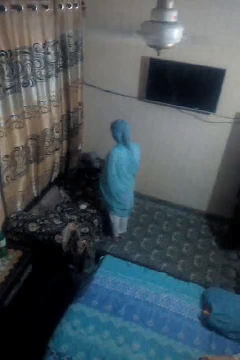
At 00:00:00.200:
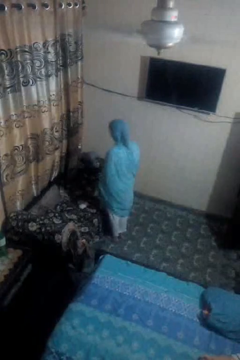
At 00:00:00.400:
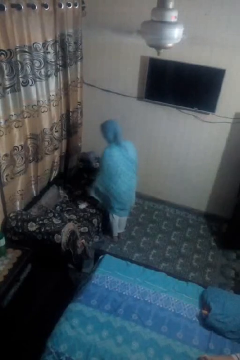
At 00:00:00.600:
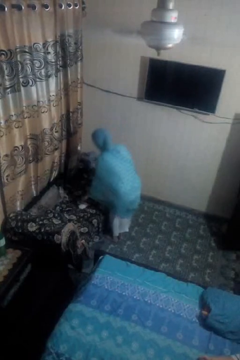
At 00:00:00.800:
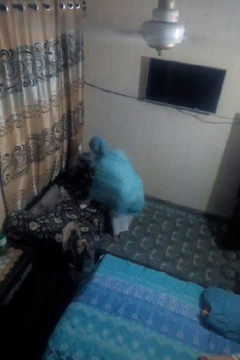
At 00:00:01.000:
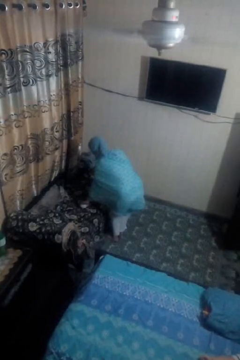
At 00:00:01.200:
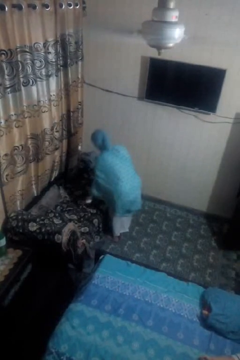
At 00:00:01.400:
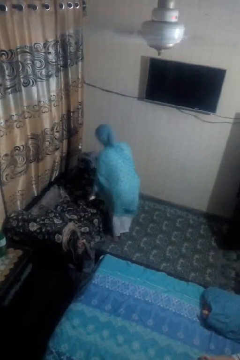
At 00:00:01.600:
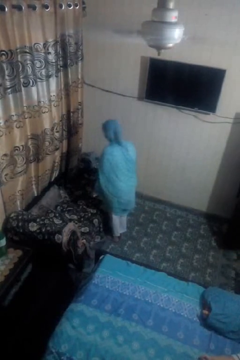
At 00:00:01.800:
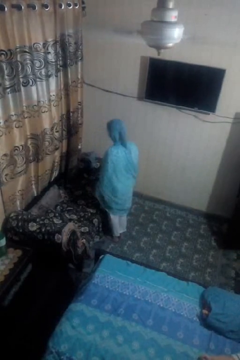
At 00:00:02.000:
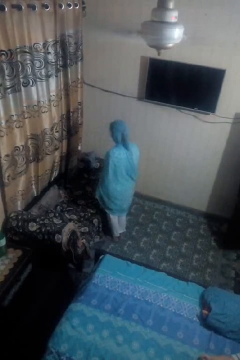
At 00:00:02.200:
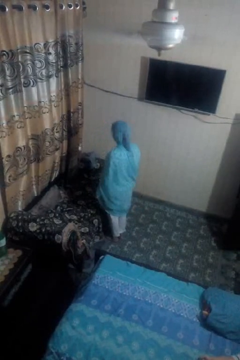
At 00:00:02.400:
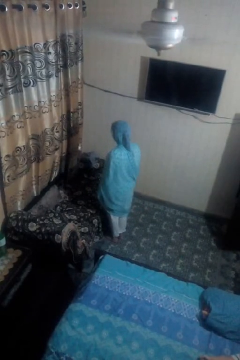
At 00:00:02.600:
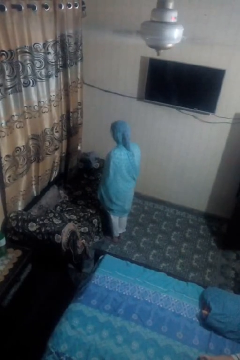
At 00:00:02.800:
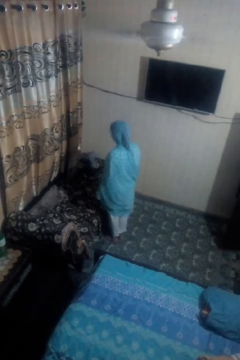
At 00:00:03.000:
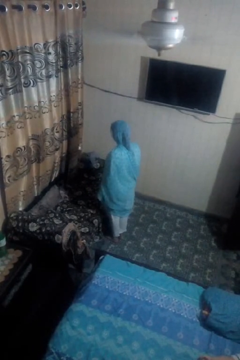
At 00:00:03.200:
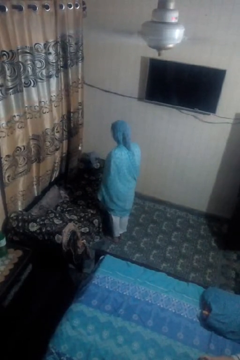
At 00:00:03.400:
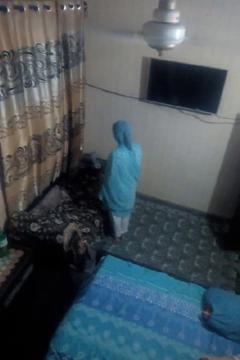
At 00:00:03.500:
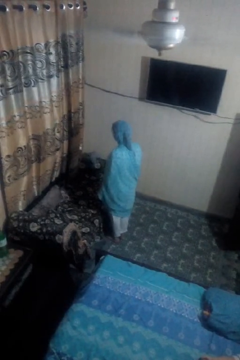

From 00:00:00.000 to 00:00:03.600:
person picks up object from couch

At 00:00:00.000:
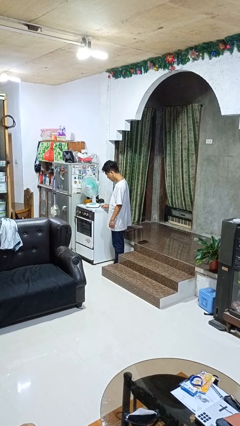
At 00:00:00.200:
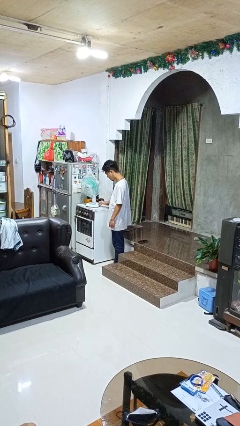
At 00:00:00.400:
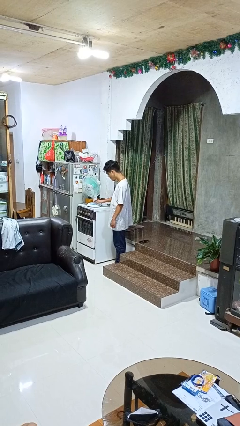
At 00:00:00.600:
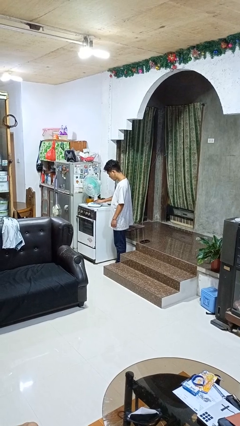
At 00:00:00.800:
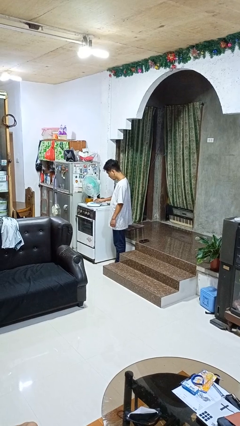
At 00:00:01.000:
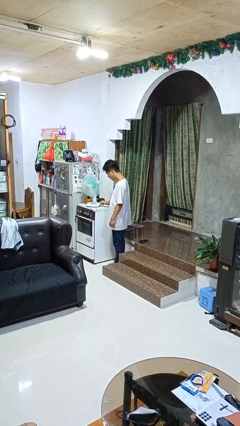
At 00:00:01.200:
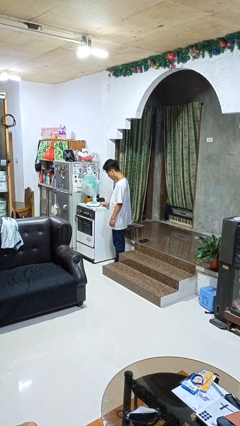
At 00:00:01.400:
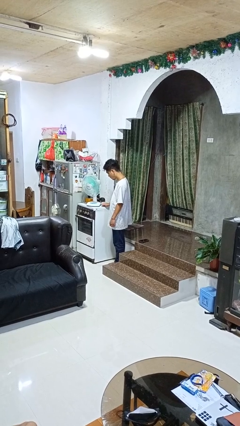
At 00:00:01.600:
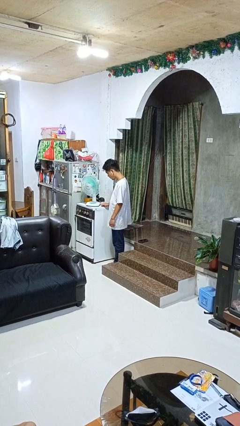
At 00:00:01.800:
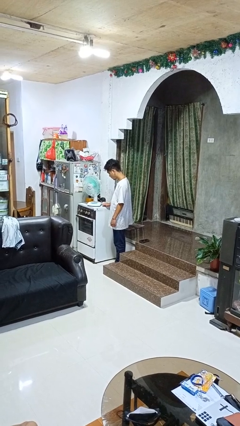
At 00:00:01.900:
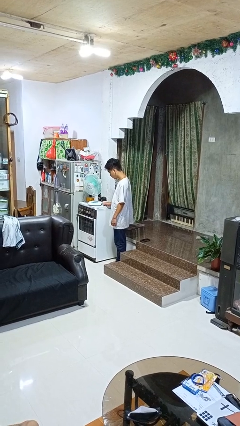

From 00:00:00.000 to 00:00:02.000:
person turns on fan

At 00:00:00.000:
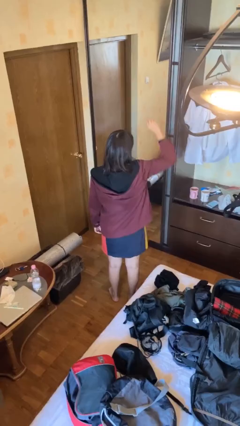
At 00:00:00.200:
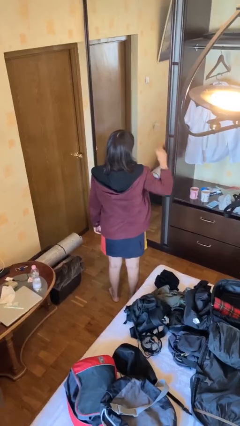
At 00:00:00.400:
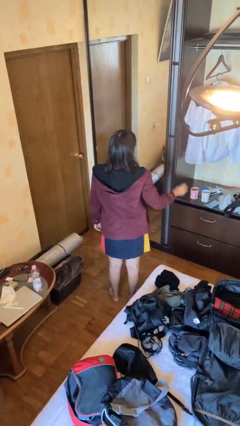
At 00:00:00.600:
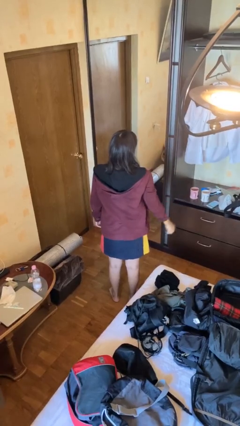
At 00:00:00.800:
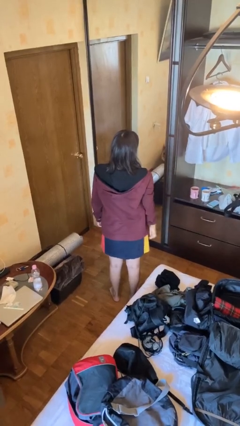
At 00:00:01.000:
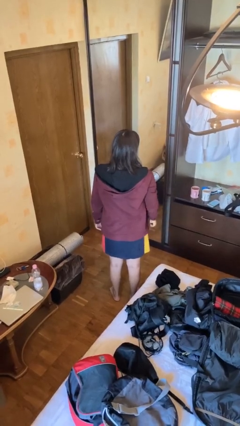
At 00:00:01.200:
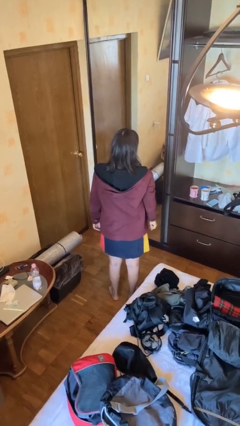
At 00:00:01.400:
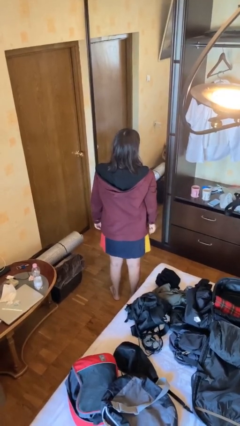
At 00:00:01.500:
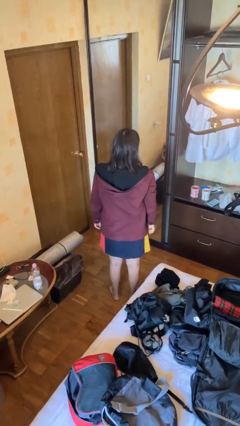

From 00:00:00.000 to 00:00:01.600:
person gestures lower hand

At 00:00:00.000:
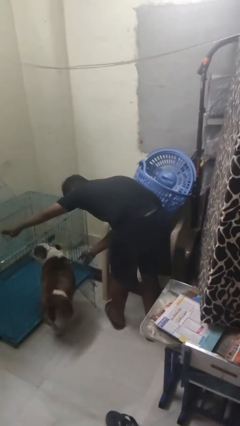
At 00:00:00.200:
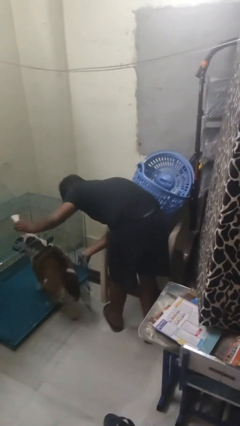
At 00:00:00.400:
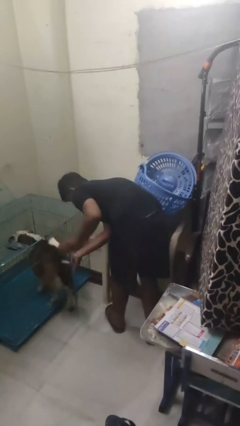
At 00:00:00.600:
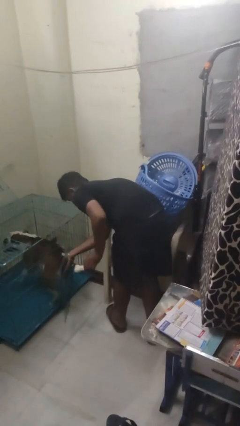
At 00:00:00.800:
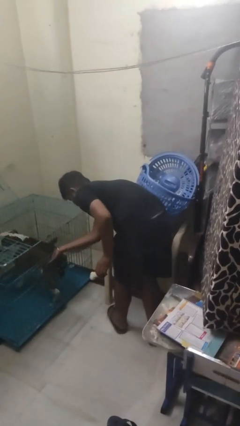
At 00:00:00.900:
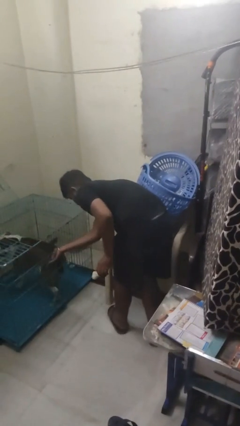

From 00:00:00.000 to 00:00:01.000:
person crates dog

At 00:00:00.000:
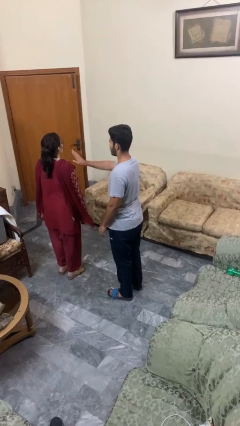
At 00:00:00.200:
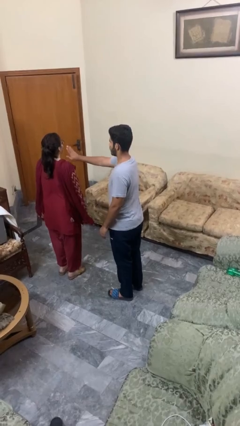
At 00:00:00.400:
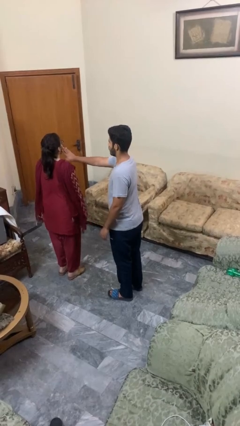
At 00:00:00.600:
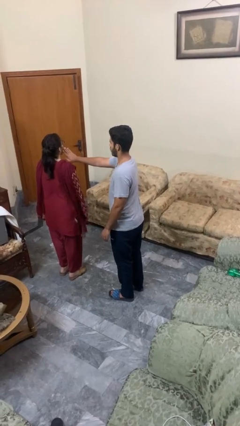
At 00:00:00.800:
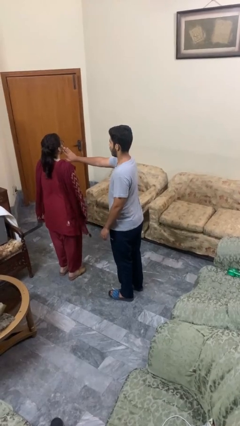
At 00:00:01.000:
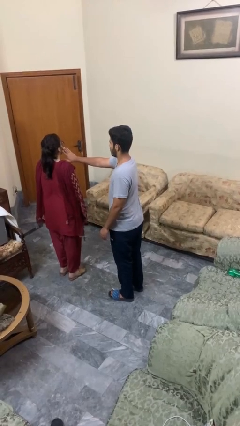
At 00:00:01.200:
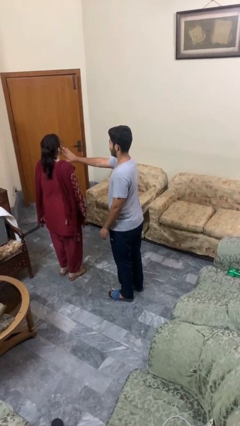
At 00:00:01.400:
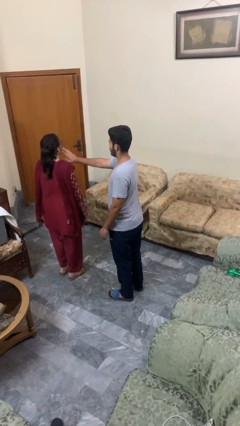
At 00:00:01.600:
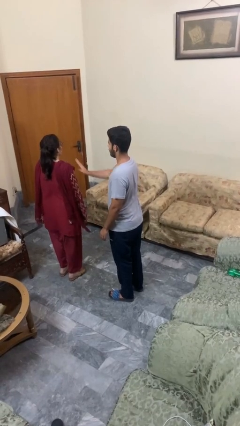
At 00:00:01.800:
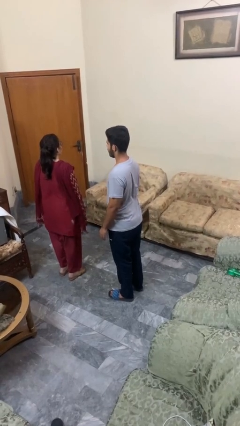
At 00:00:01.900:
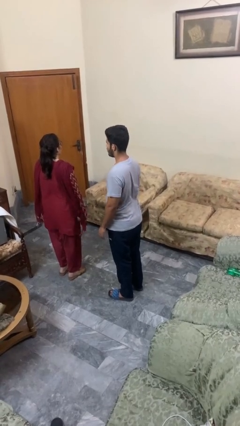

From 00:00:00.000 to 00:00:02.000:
person touches face of person

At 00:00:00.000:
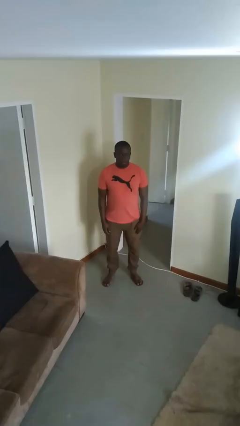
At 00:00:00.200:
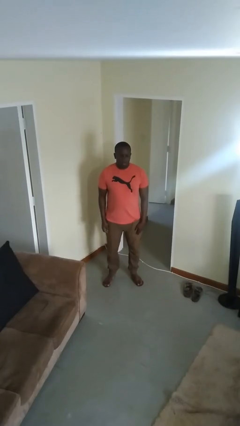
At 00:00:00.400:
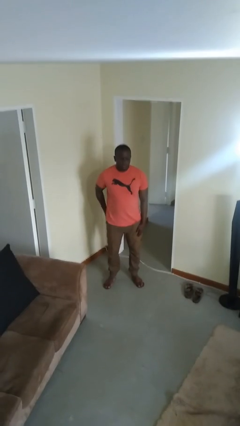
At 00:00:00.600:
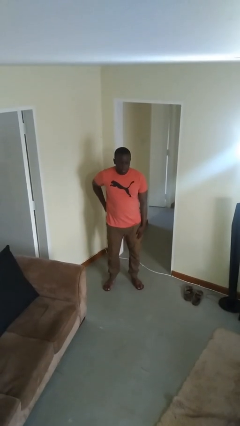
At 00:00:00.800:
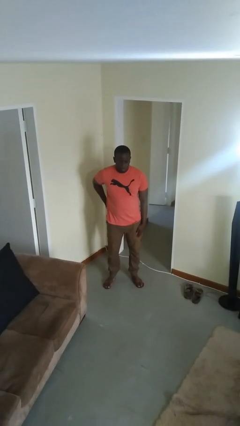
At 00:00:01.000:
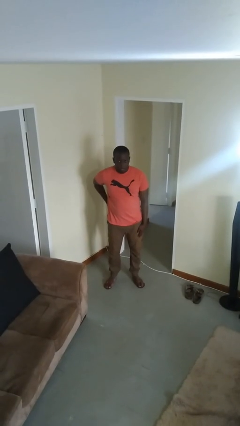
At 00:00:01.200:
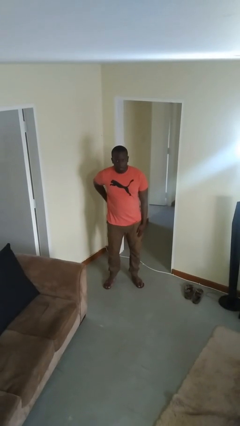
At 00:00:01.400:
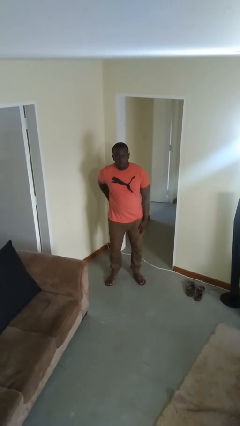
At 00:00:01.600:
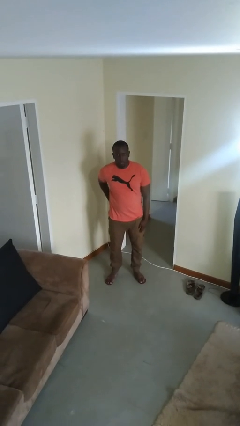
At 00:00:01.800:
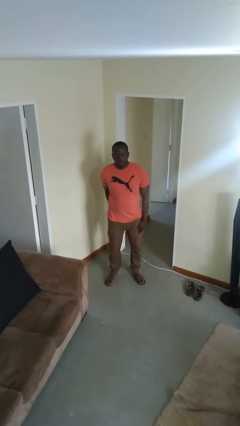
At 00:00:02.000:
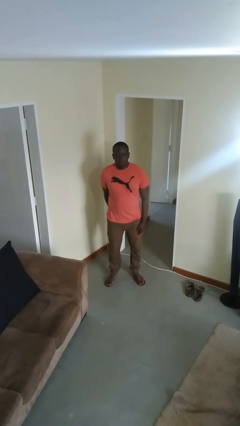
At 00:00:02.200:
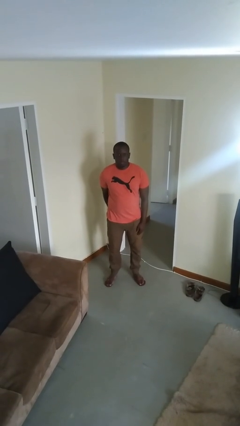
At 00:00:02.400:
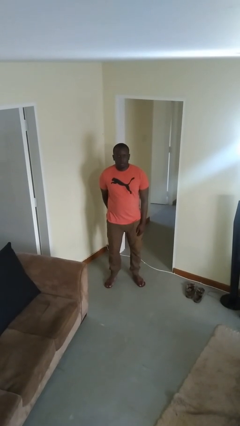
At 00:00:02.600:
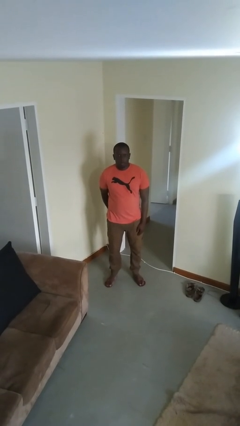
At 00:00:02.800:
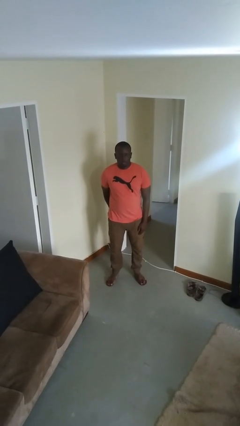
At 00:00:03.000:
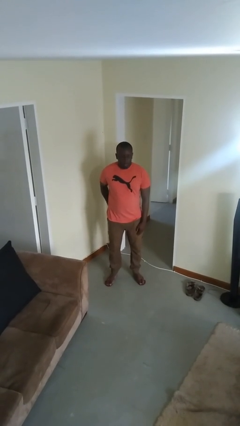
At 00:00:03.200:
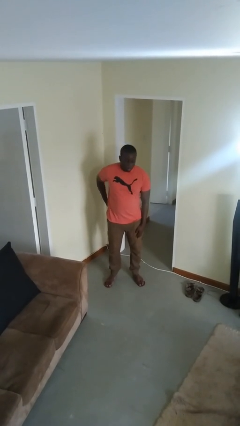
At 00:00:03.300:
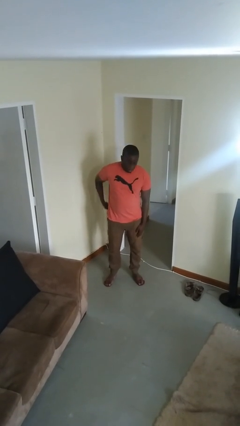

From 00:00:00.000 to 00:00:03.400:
person puts hands in back pockets

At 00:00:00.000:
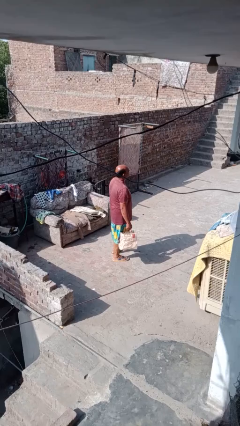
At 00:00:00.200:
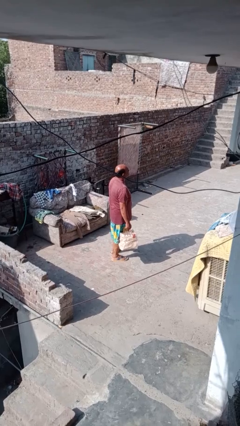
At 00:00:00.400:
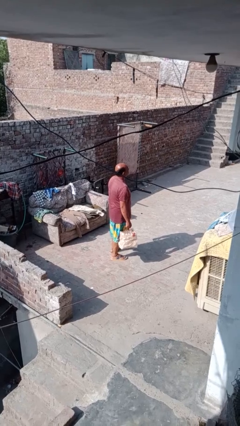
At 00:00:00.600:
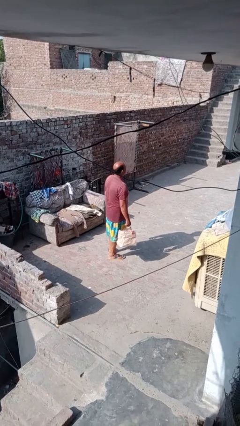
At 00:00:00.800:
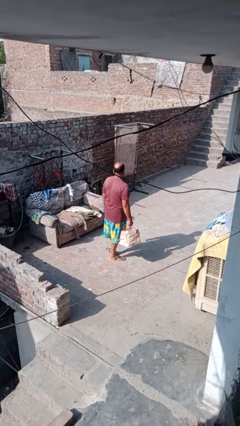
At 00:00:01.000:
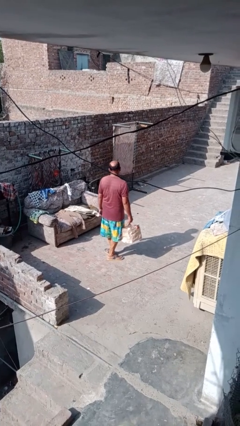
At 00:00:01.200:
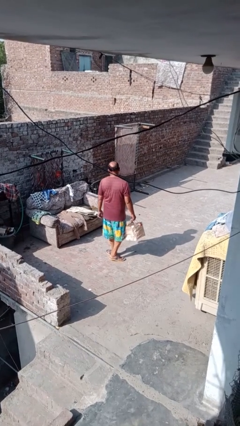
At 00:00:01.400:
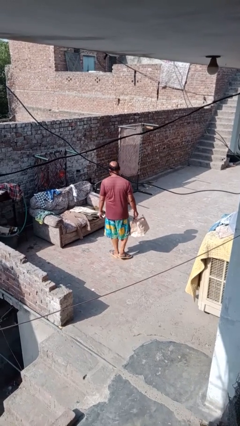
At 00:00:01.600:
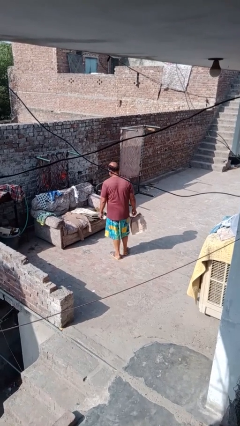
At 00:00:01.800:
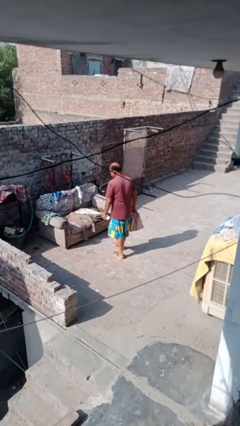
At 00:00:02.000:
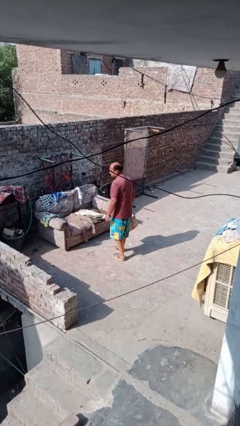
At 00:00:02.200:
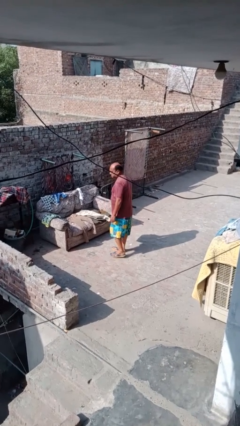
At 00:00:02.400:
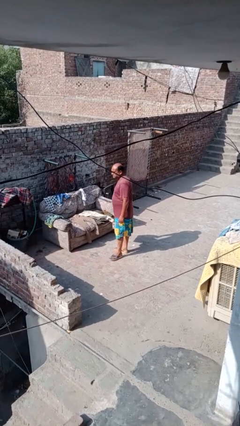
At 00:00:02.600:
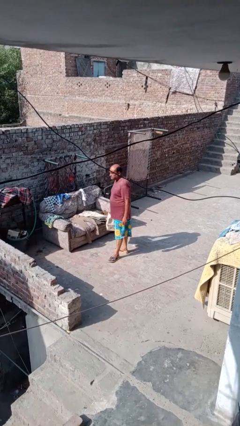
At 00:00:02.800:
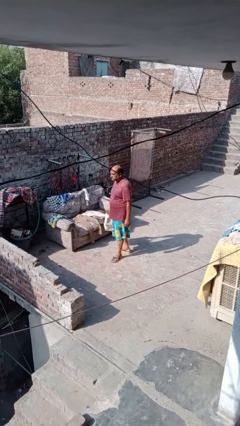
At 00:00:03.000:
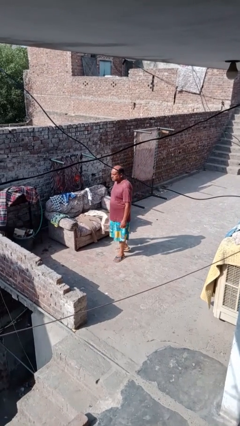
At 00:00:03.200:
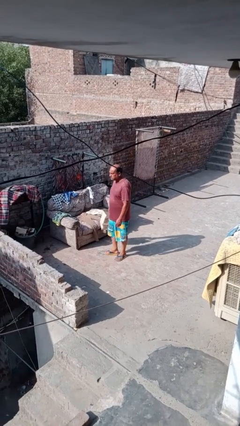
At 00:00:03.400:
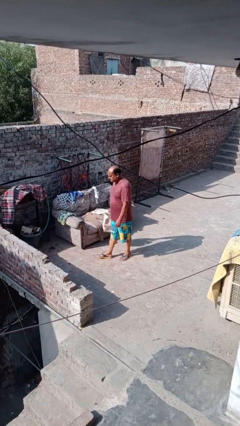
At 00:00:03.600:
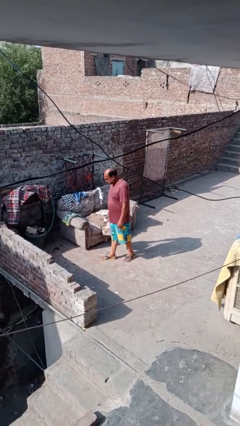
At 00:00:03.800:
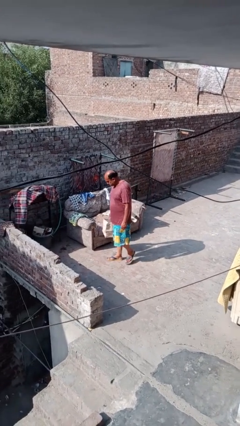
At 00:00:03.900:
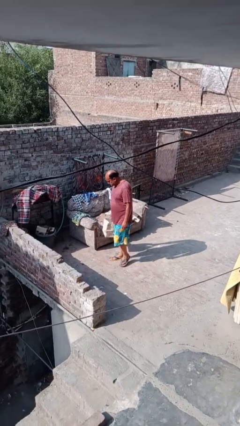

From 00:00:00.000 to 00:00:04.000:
person carries groceries
